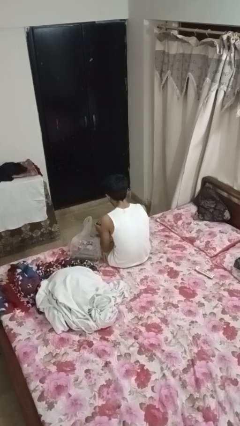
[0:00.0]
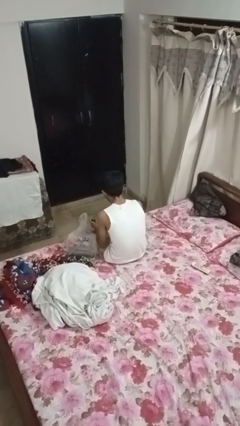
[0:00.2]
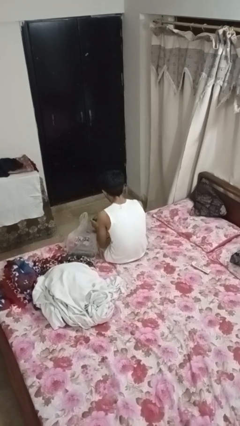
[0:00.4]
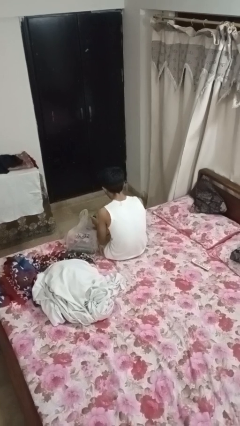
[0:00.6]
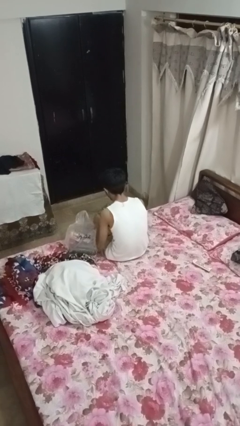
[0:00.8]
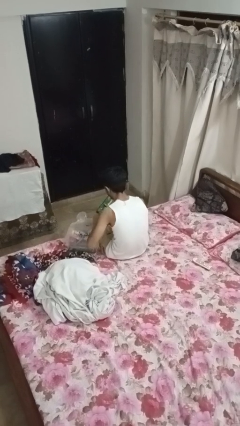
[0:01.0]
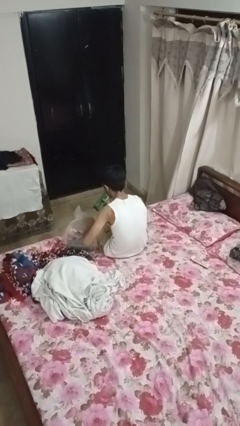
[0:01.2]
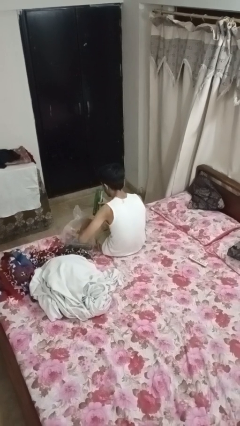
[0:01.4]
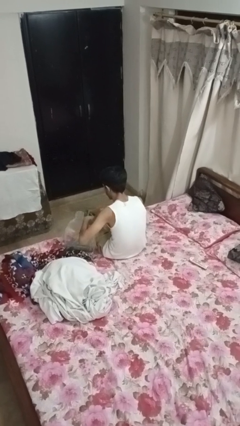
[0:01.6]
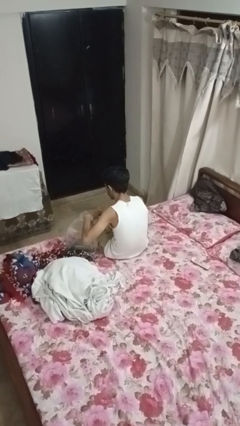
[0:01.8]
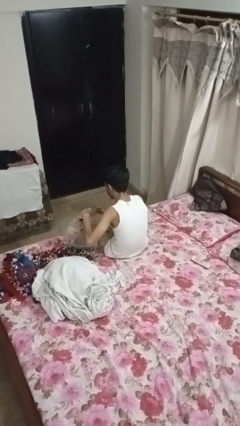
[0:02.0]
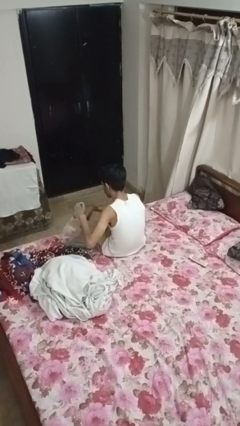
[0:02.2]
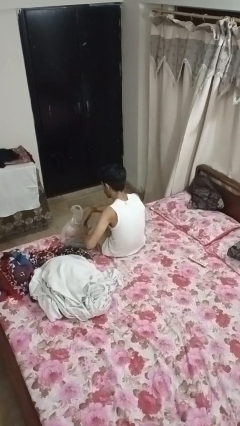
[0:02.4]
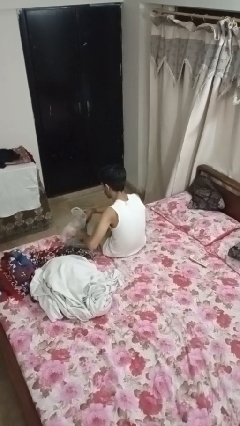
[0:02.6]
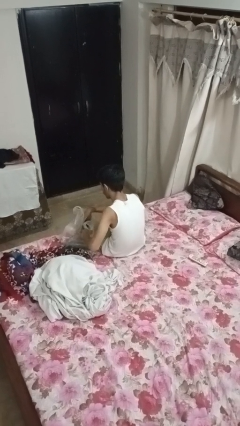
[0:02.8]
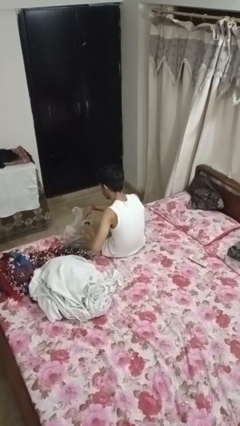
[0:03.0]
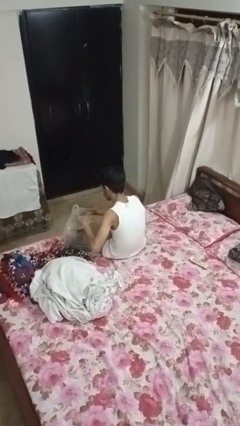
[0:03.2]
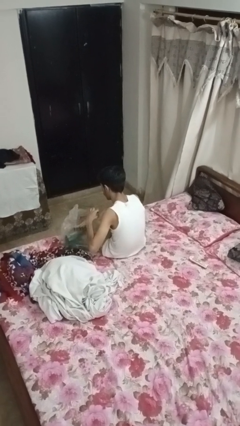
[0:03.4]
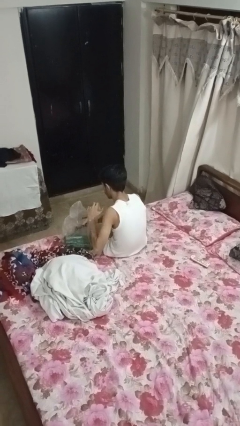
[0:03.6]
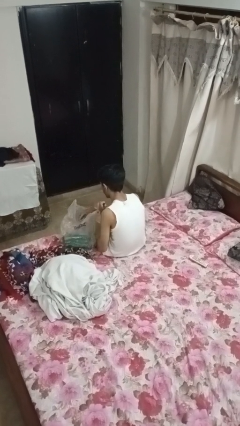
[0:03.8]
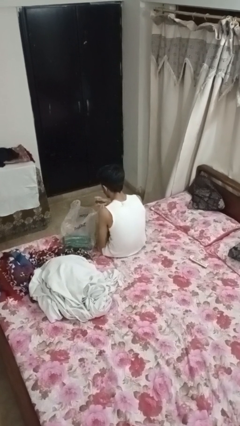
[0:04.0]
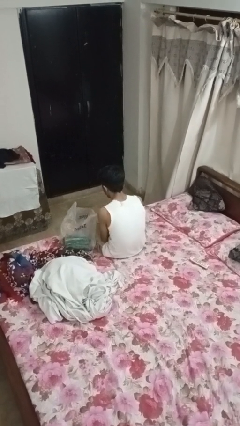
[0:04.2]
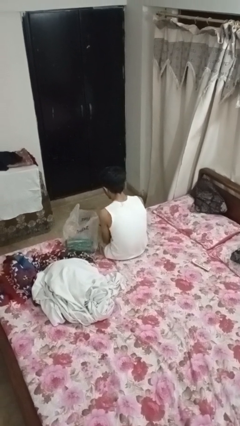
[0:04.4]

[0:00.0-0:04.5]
person puts object into bag

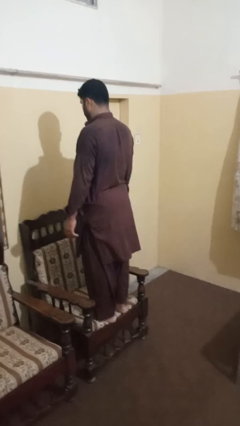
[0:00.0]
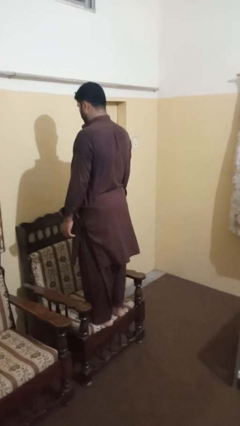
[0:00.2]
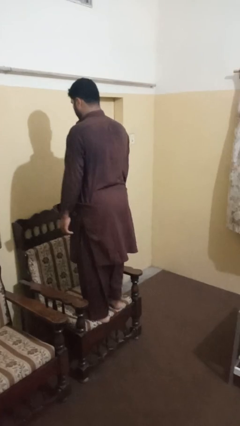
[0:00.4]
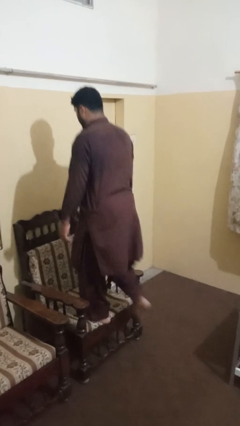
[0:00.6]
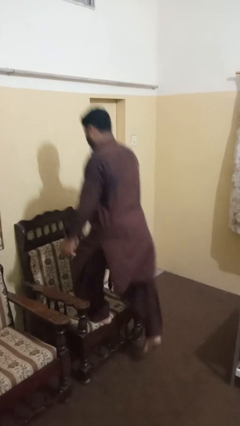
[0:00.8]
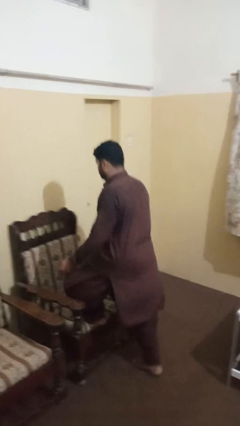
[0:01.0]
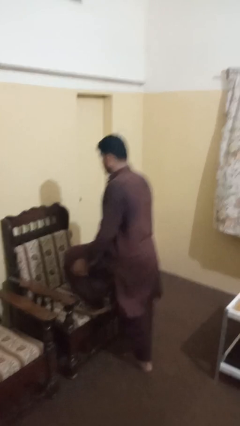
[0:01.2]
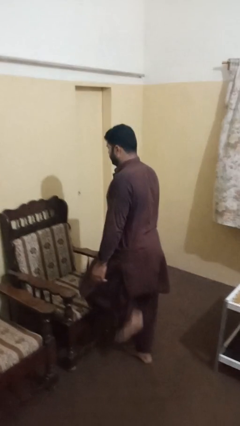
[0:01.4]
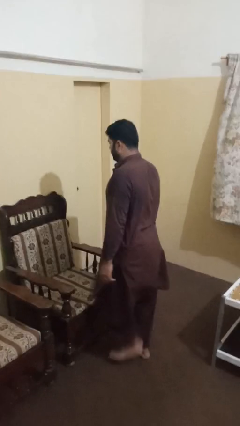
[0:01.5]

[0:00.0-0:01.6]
person climbs off chair

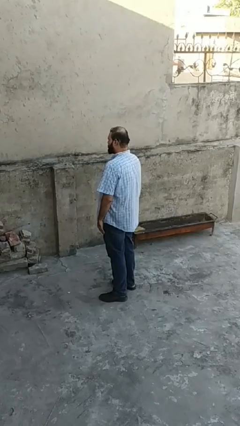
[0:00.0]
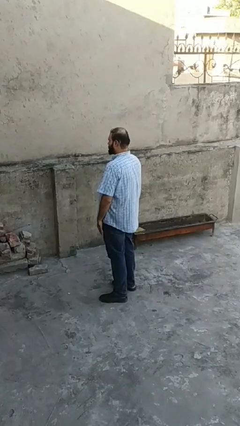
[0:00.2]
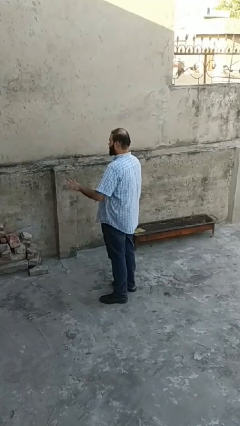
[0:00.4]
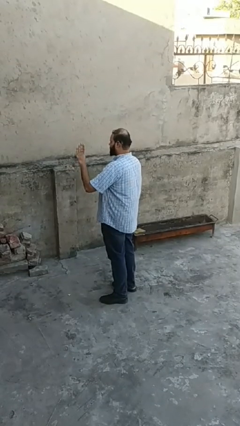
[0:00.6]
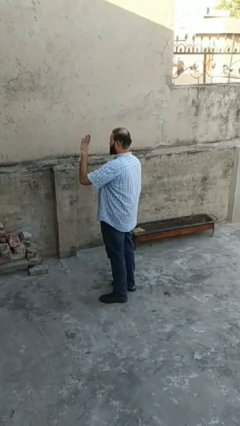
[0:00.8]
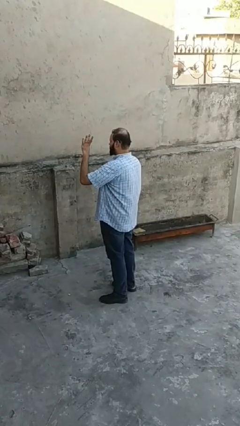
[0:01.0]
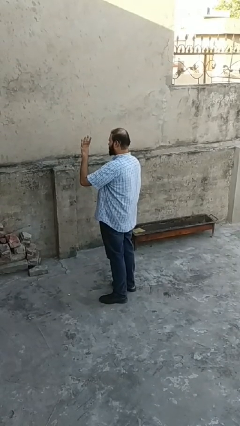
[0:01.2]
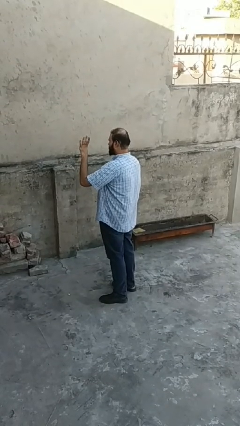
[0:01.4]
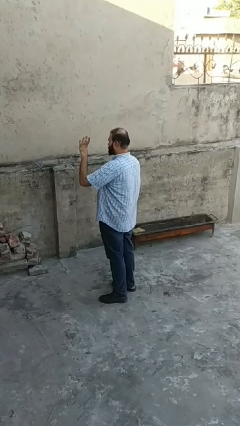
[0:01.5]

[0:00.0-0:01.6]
person gestures number four

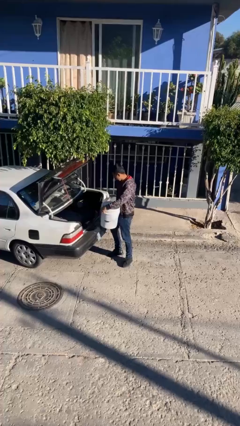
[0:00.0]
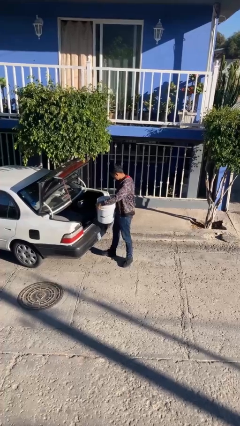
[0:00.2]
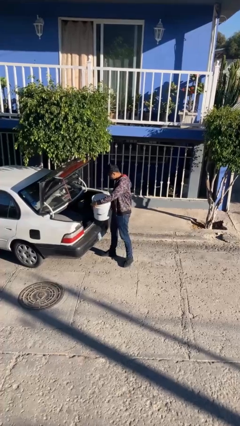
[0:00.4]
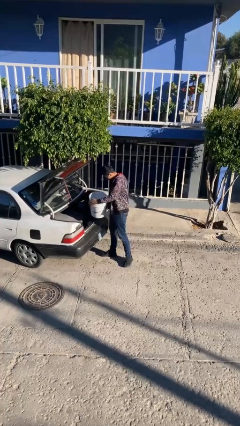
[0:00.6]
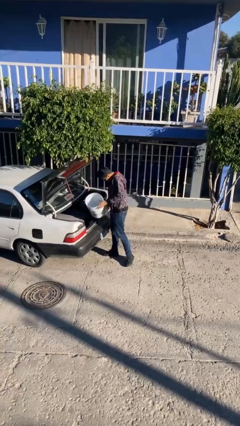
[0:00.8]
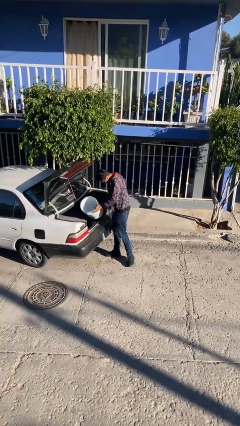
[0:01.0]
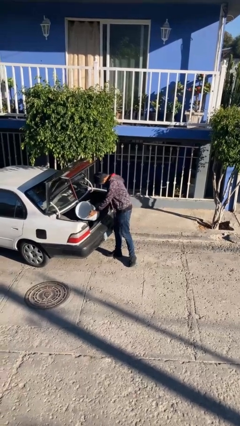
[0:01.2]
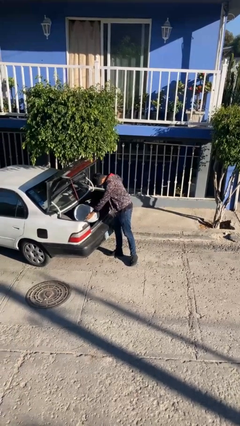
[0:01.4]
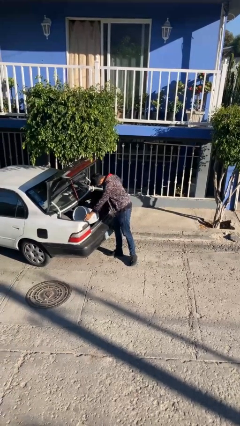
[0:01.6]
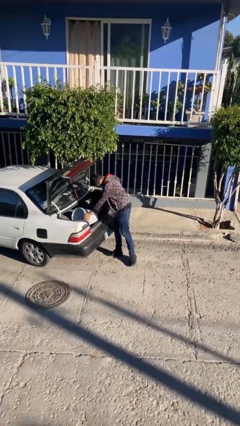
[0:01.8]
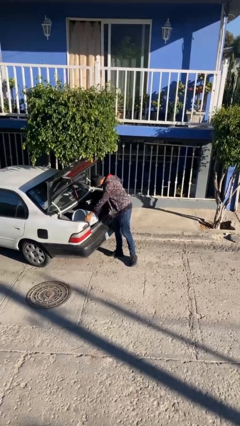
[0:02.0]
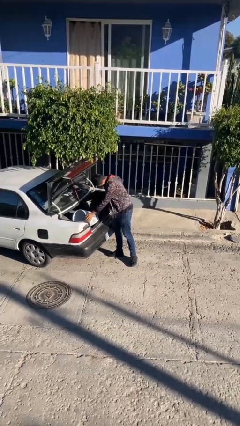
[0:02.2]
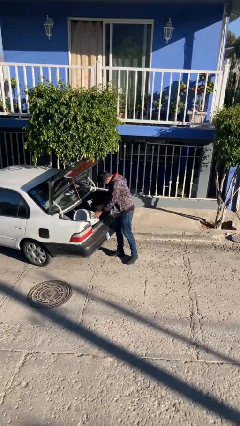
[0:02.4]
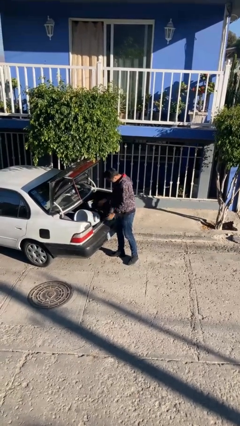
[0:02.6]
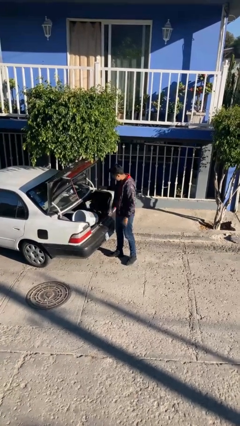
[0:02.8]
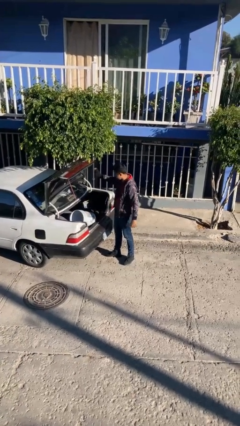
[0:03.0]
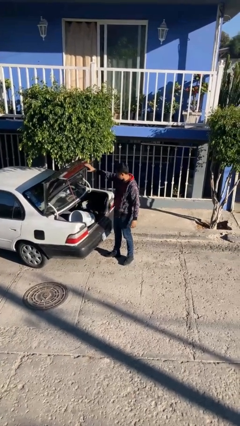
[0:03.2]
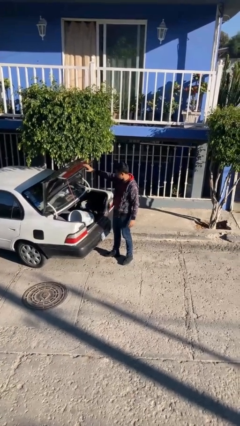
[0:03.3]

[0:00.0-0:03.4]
person loads car

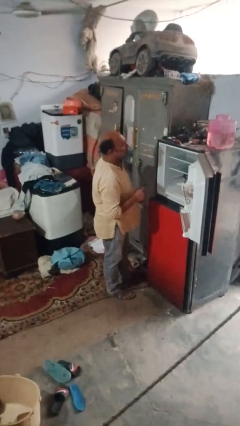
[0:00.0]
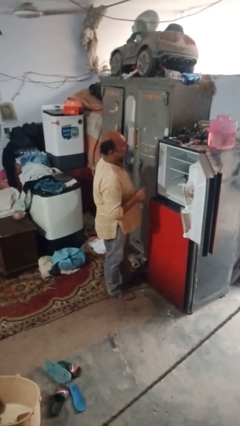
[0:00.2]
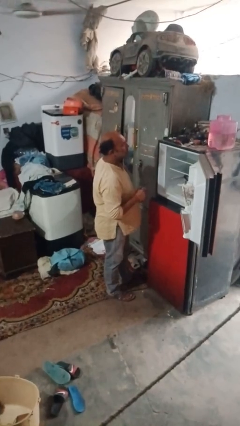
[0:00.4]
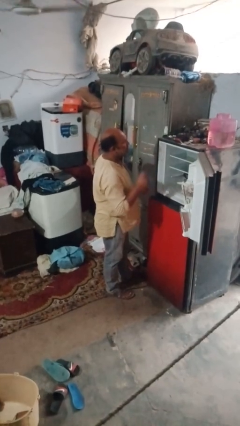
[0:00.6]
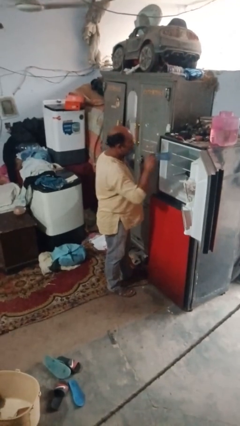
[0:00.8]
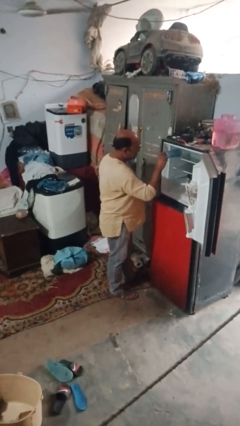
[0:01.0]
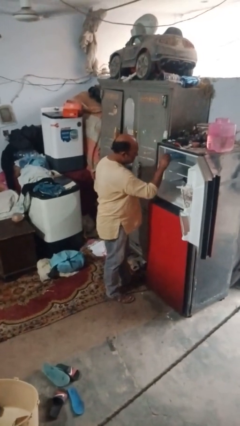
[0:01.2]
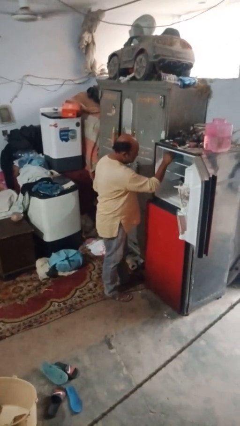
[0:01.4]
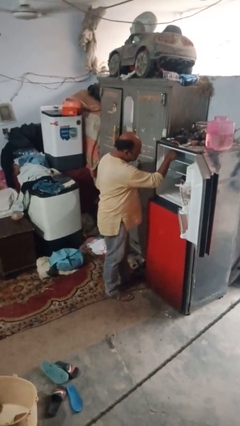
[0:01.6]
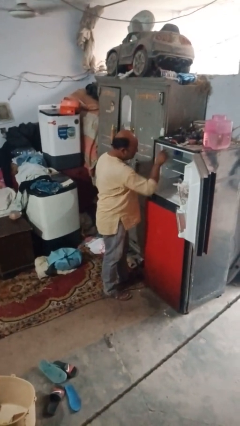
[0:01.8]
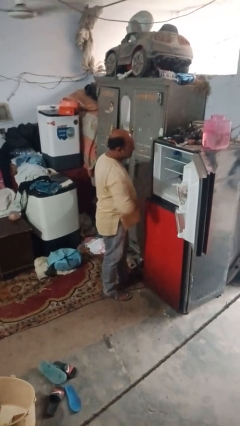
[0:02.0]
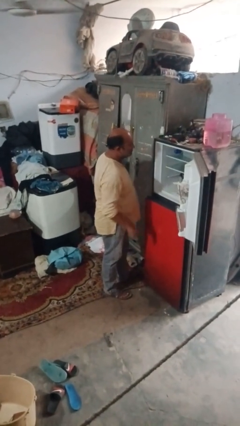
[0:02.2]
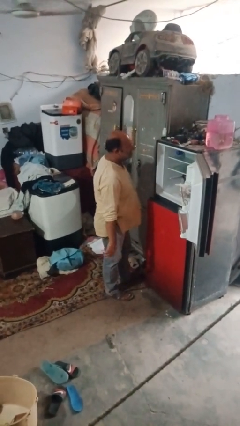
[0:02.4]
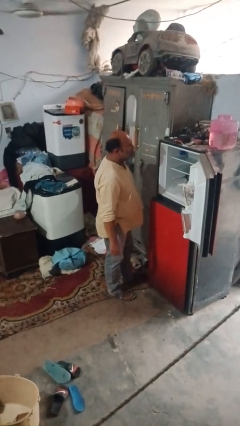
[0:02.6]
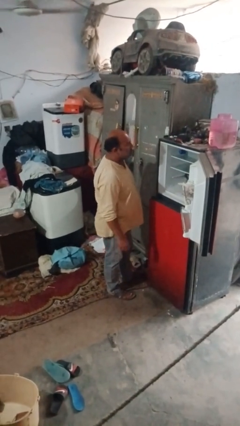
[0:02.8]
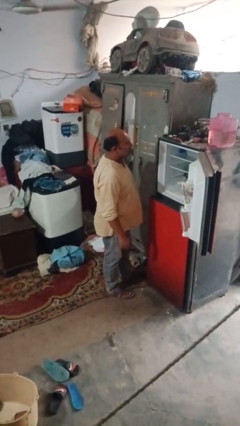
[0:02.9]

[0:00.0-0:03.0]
person puts object into refrigerator

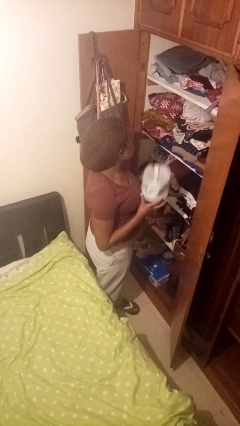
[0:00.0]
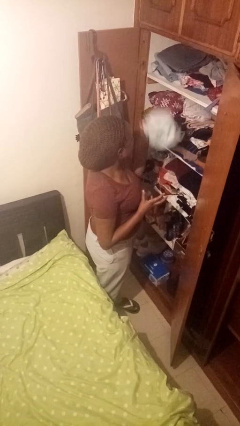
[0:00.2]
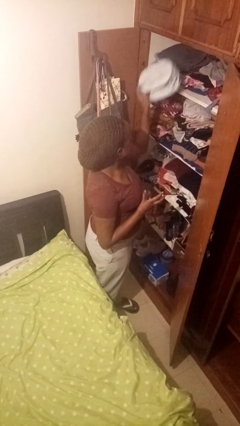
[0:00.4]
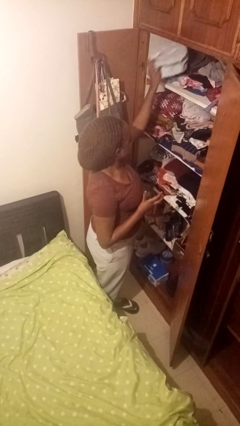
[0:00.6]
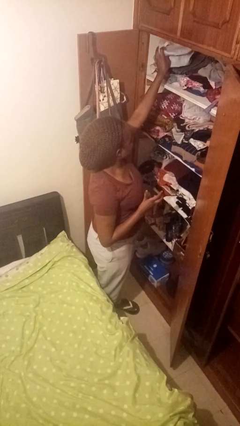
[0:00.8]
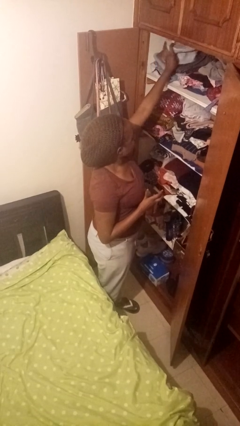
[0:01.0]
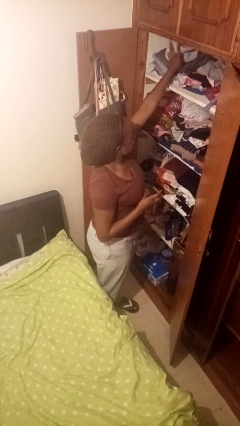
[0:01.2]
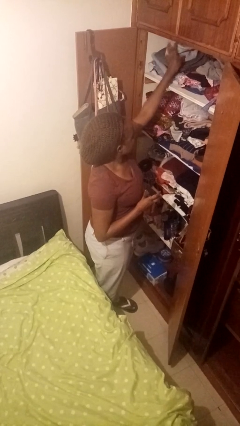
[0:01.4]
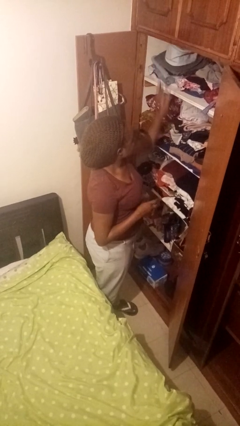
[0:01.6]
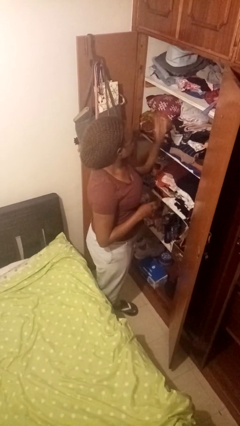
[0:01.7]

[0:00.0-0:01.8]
person puts down object on shelf

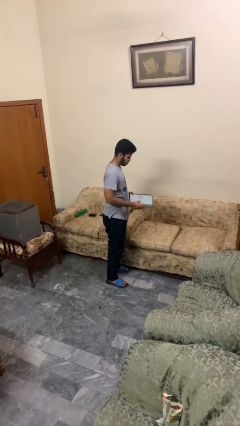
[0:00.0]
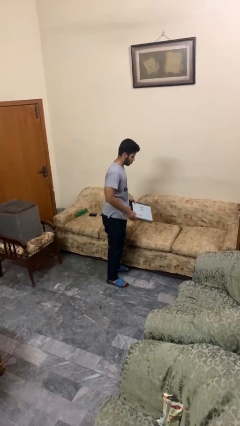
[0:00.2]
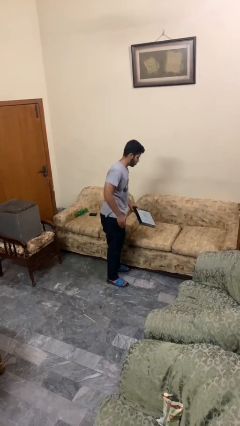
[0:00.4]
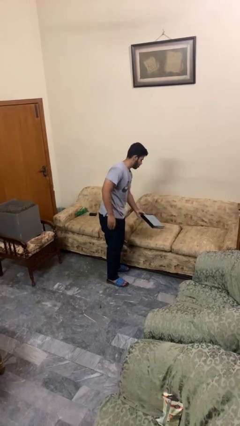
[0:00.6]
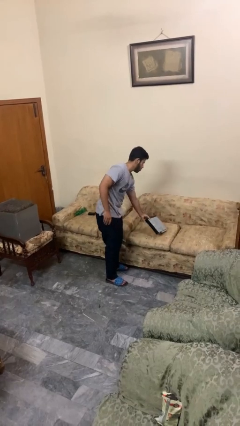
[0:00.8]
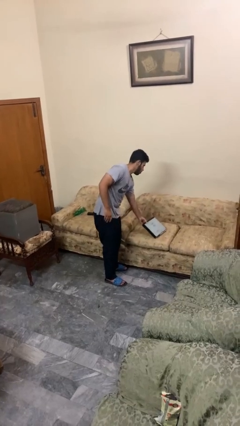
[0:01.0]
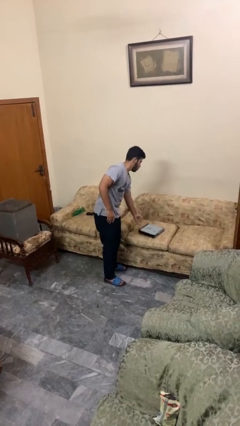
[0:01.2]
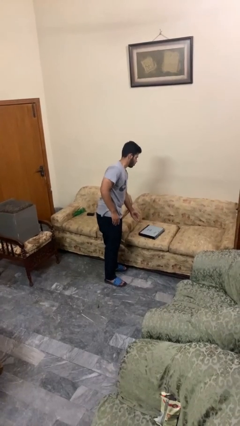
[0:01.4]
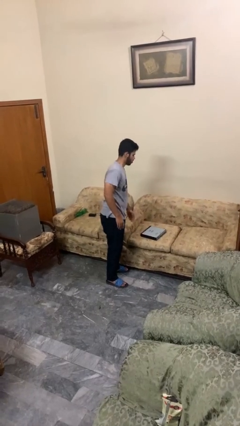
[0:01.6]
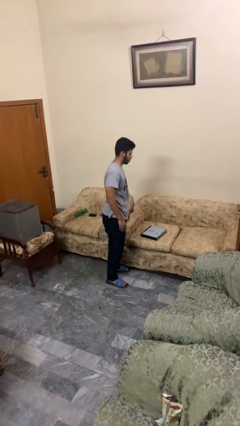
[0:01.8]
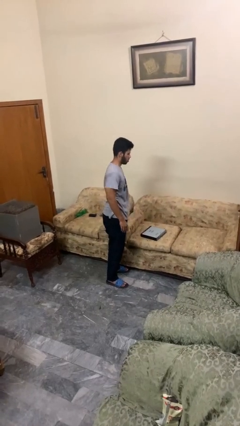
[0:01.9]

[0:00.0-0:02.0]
person puts down object on couch
